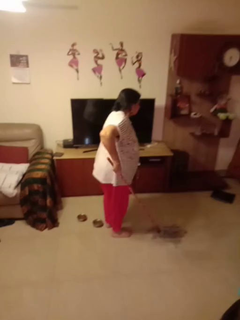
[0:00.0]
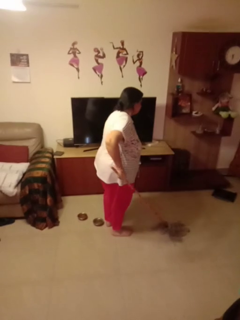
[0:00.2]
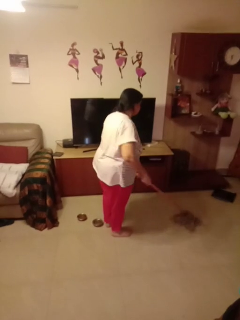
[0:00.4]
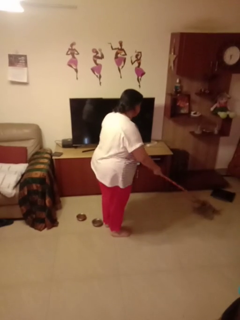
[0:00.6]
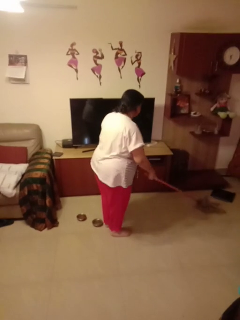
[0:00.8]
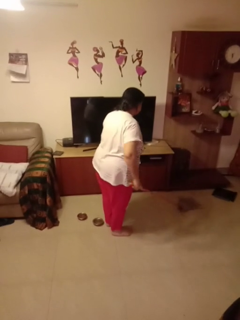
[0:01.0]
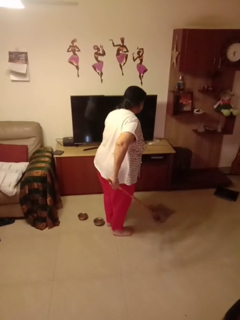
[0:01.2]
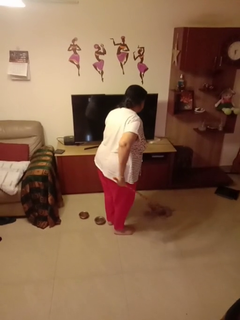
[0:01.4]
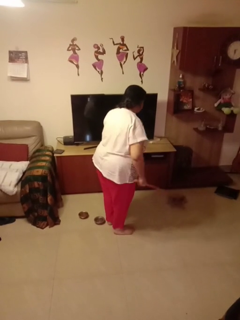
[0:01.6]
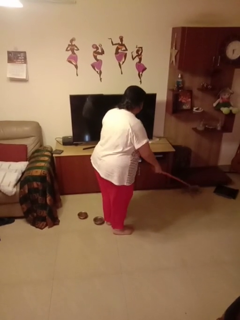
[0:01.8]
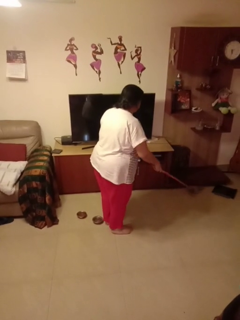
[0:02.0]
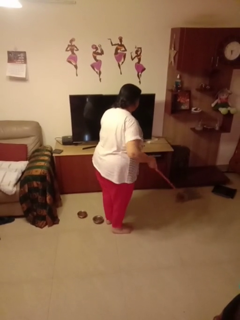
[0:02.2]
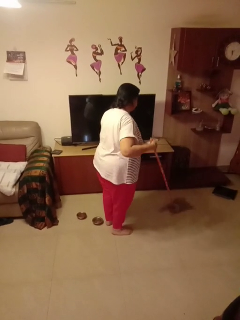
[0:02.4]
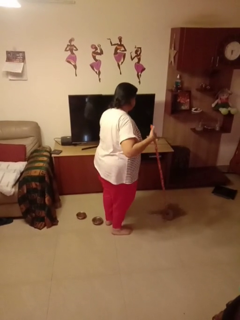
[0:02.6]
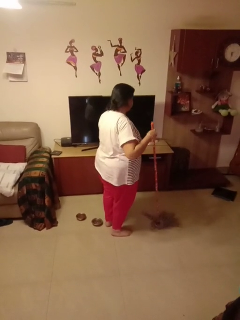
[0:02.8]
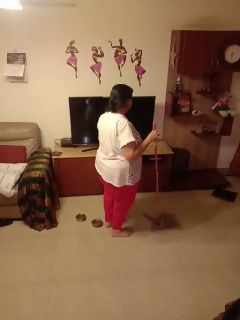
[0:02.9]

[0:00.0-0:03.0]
person mops

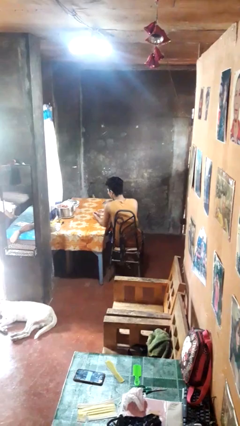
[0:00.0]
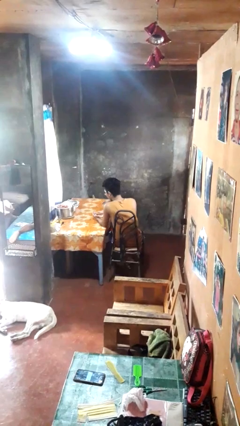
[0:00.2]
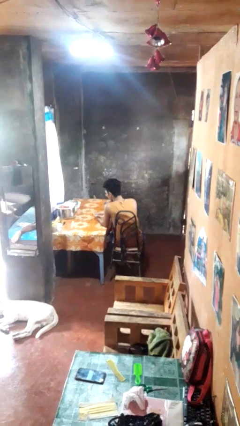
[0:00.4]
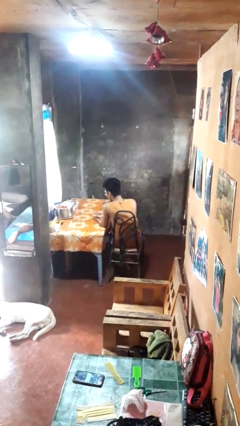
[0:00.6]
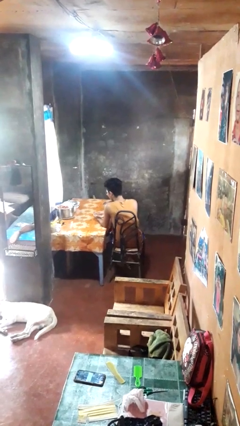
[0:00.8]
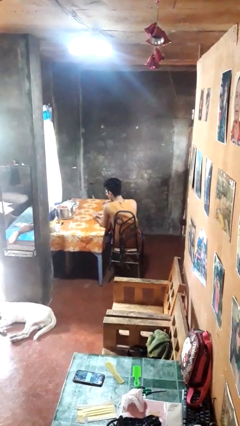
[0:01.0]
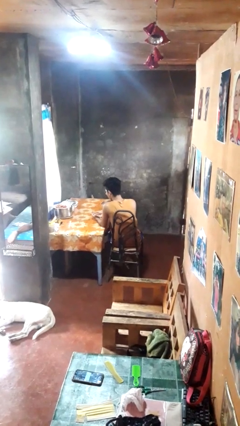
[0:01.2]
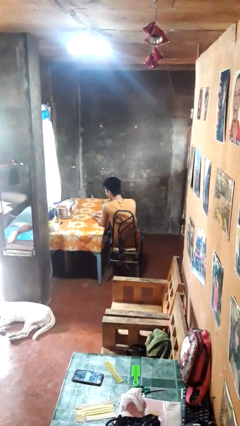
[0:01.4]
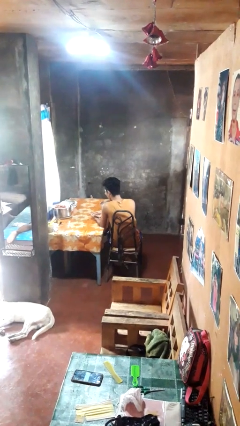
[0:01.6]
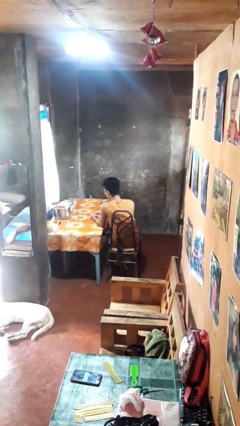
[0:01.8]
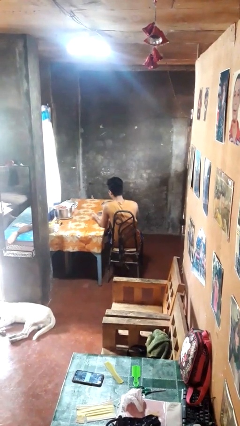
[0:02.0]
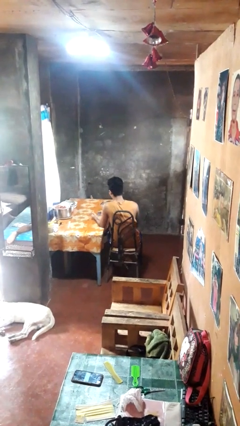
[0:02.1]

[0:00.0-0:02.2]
person clips fingernails

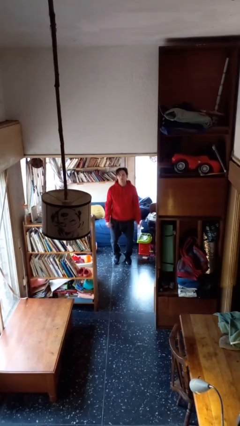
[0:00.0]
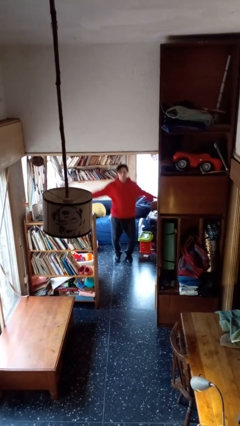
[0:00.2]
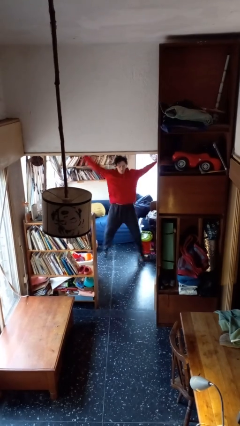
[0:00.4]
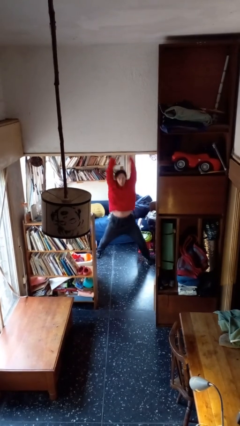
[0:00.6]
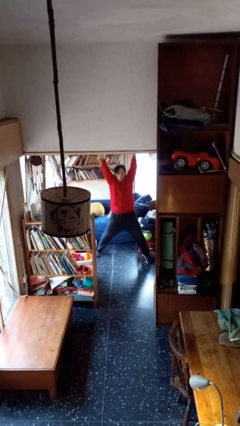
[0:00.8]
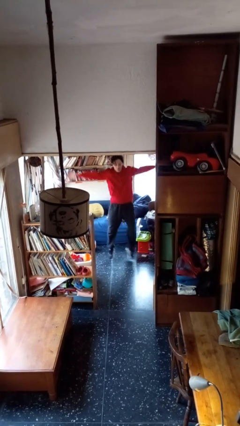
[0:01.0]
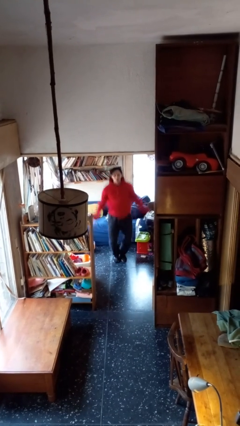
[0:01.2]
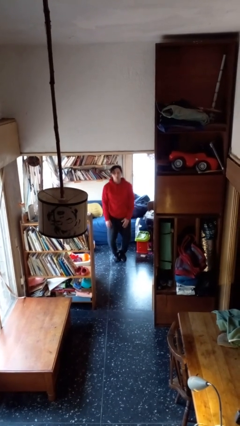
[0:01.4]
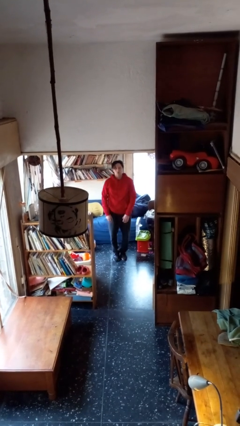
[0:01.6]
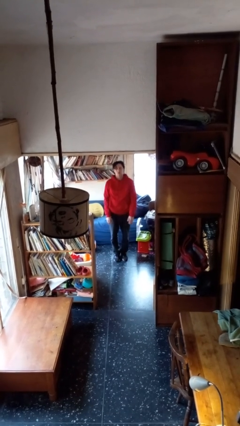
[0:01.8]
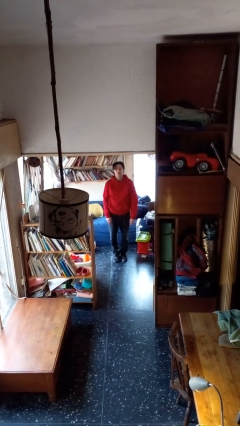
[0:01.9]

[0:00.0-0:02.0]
person exercises with jumping jacks

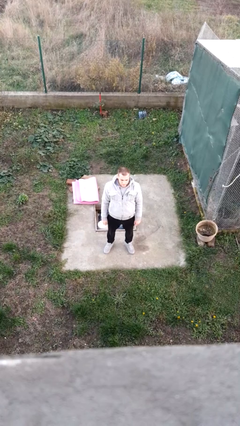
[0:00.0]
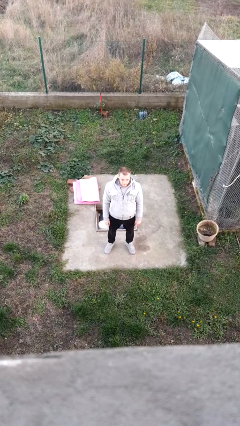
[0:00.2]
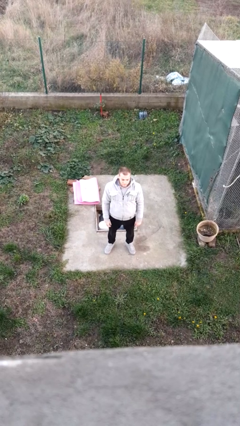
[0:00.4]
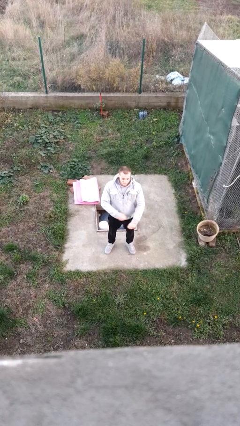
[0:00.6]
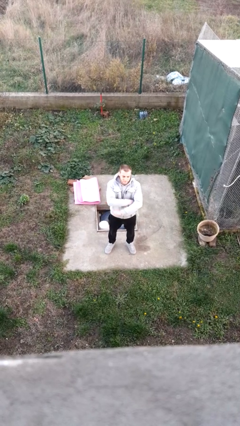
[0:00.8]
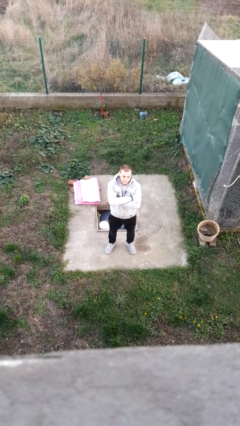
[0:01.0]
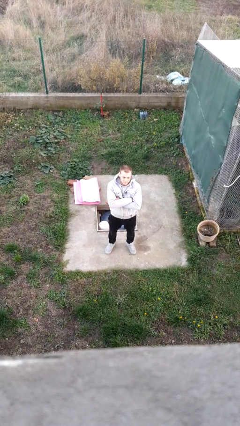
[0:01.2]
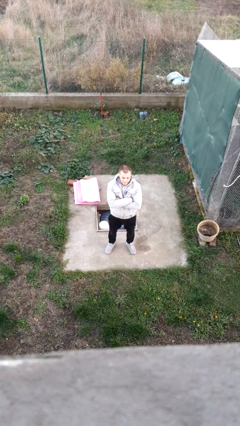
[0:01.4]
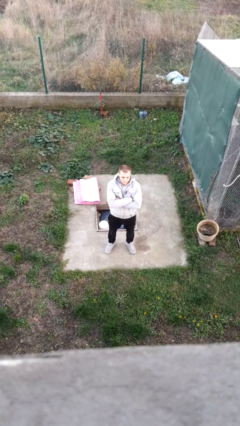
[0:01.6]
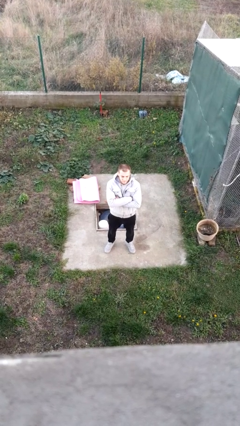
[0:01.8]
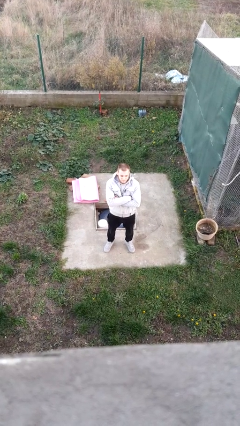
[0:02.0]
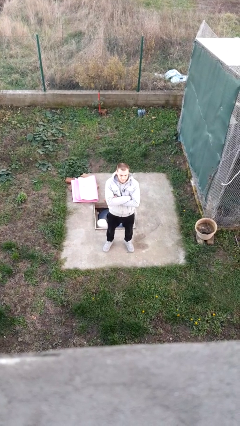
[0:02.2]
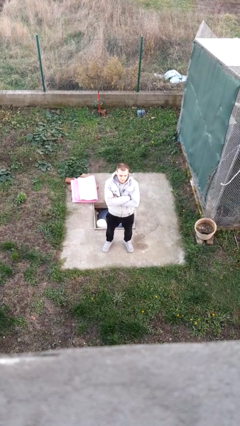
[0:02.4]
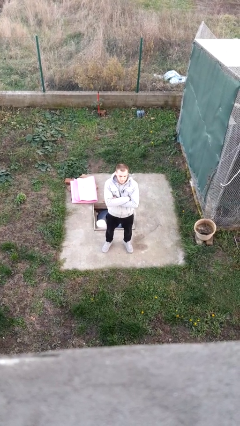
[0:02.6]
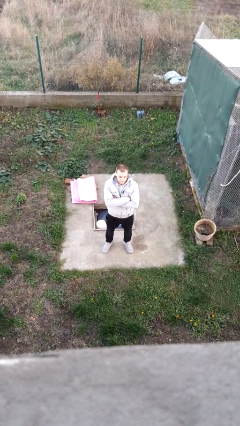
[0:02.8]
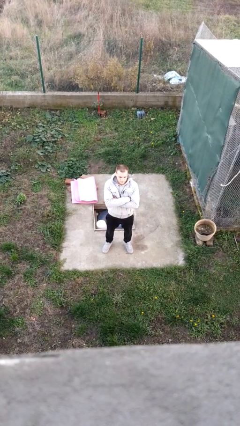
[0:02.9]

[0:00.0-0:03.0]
person crosses arms

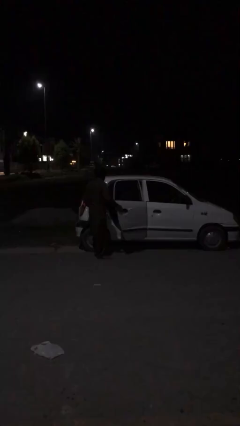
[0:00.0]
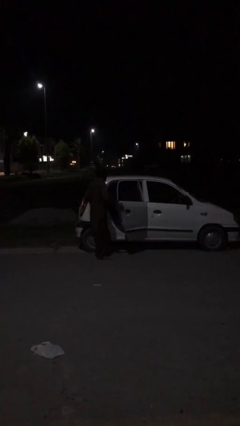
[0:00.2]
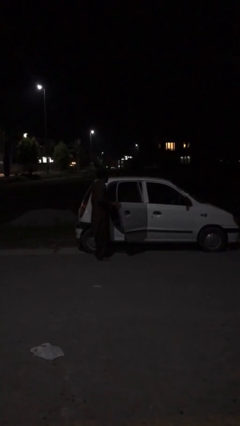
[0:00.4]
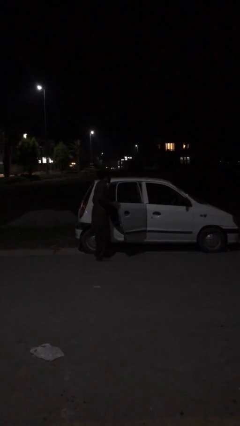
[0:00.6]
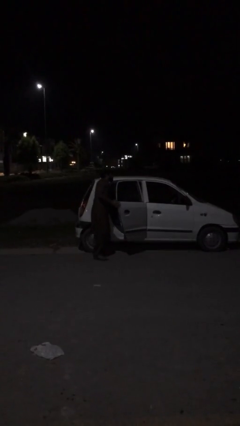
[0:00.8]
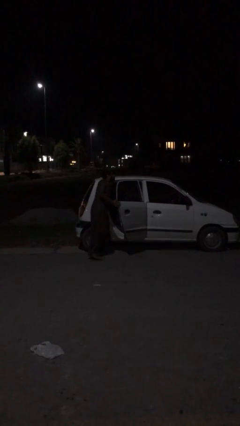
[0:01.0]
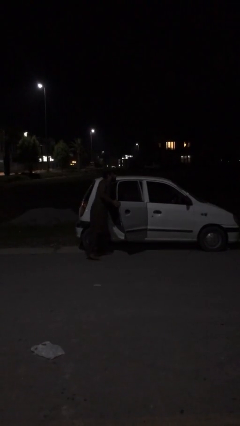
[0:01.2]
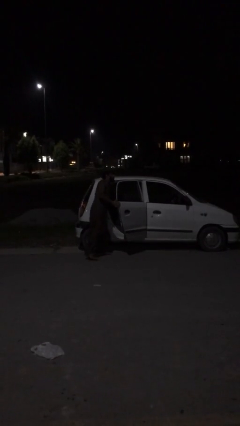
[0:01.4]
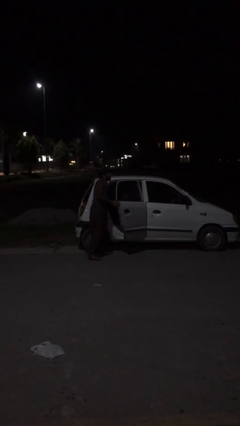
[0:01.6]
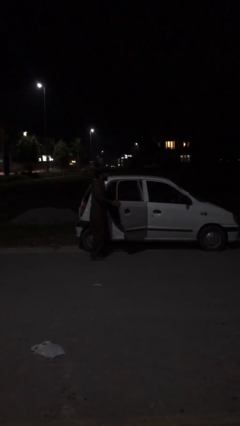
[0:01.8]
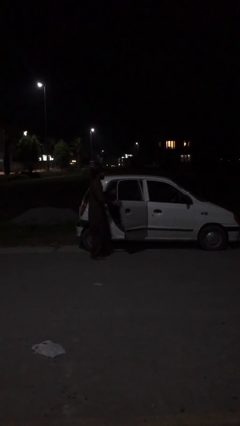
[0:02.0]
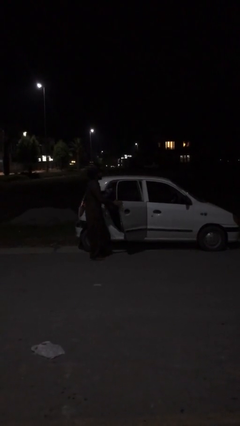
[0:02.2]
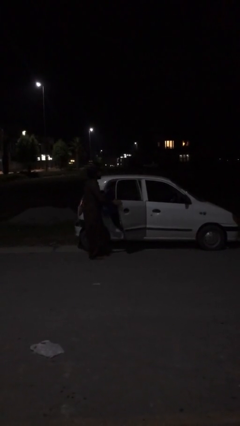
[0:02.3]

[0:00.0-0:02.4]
person opens car door

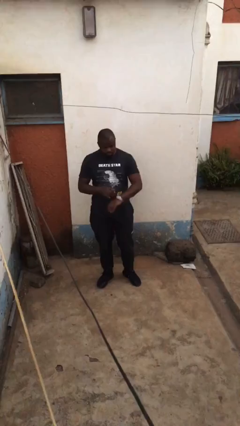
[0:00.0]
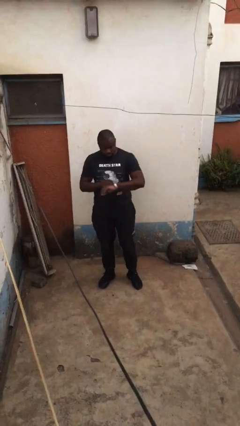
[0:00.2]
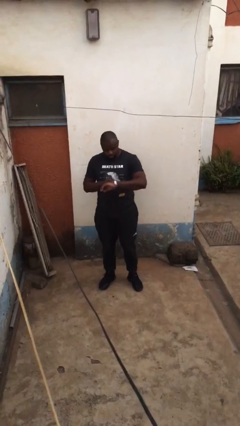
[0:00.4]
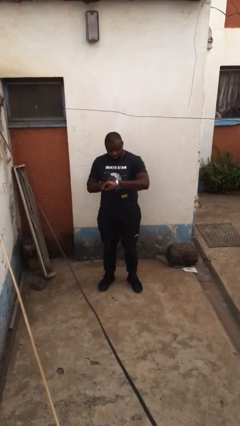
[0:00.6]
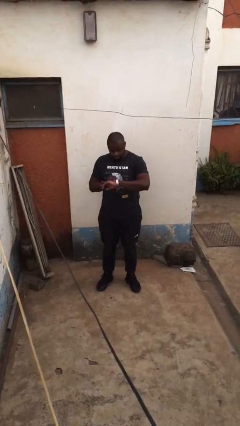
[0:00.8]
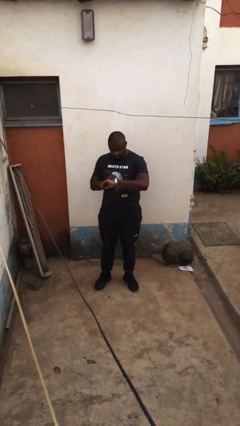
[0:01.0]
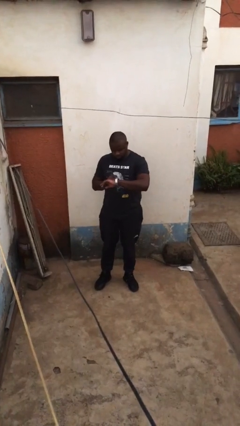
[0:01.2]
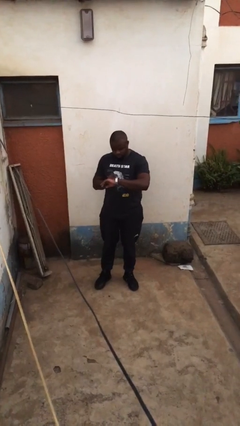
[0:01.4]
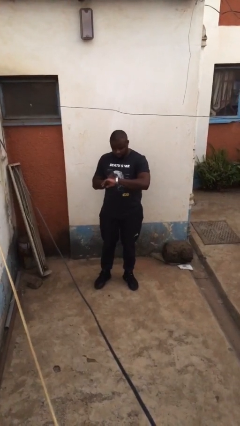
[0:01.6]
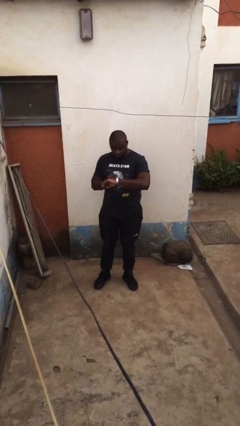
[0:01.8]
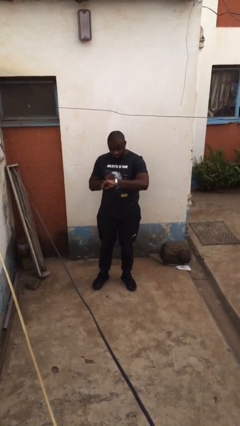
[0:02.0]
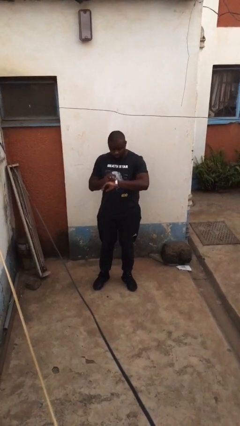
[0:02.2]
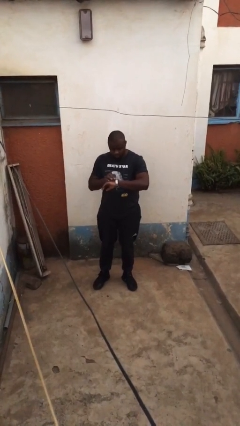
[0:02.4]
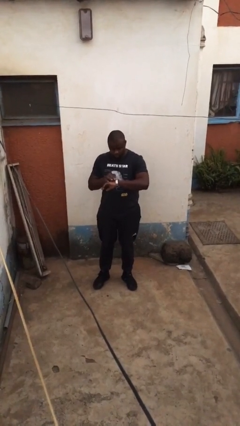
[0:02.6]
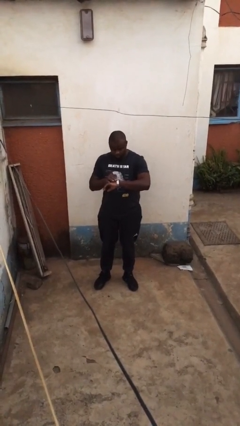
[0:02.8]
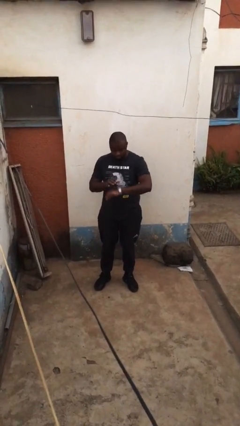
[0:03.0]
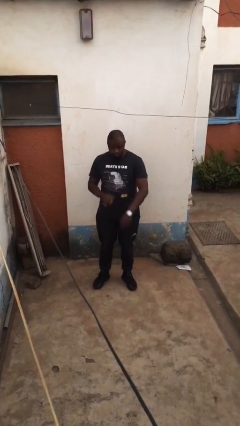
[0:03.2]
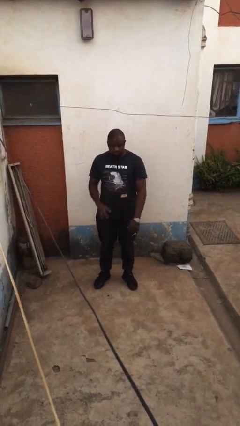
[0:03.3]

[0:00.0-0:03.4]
person looks at wristwatch

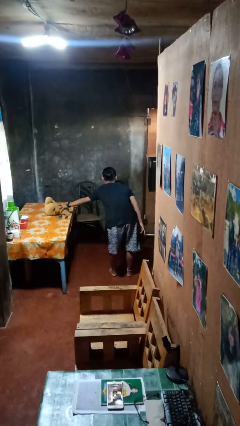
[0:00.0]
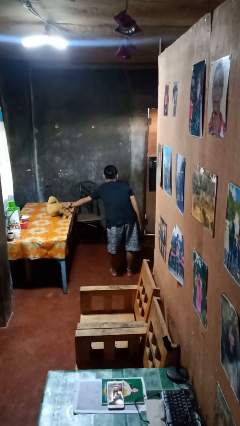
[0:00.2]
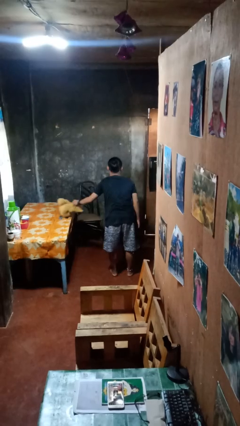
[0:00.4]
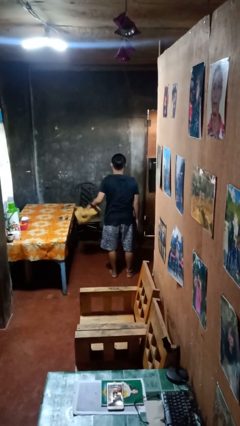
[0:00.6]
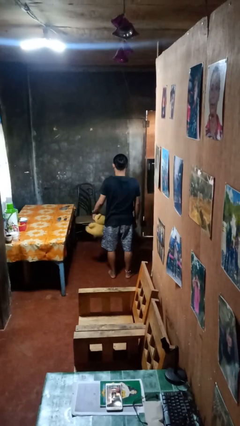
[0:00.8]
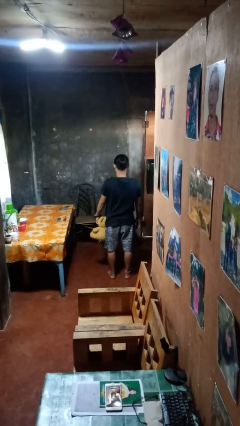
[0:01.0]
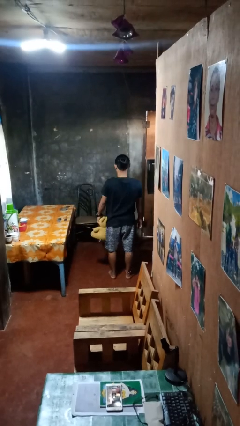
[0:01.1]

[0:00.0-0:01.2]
person picks up object from table

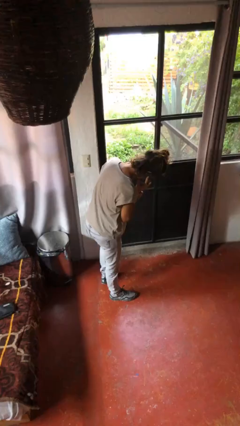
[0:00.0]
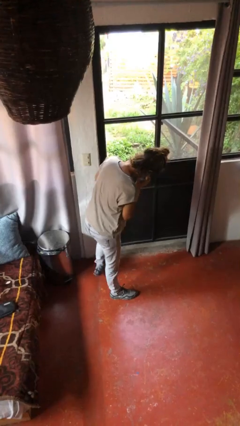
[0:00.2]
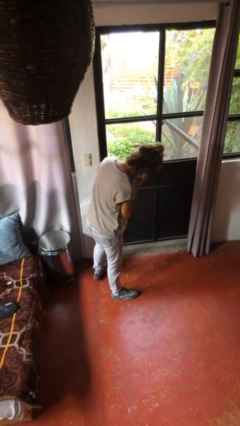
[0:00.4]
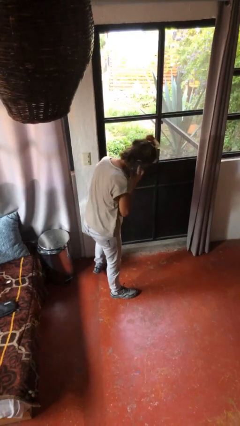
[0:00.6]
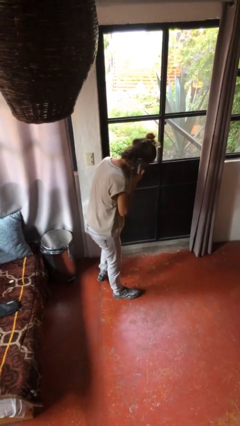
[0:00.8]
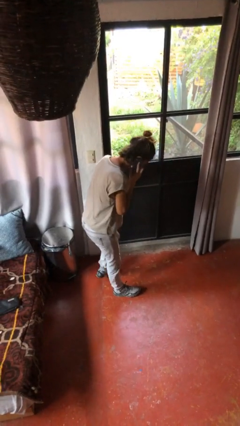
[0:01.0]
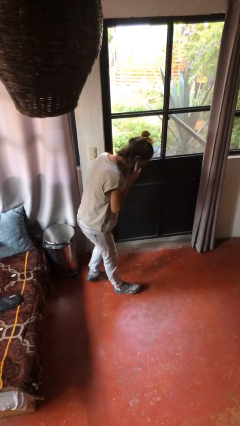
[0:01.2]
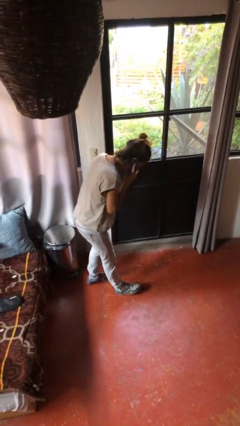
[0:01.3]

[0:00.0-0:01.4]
person opens facility door
